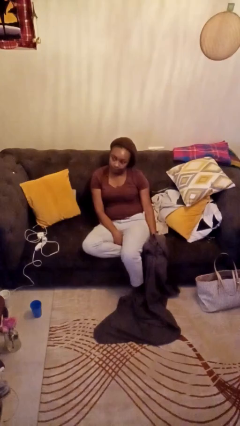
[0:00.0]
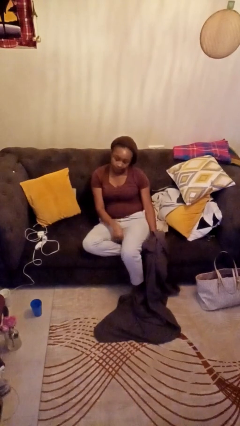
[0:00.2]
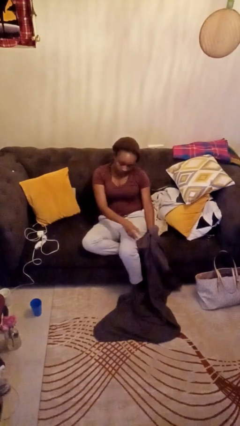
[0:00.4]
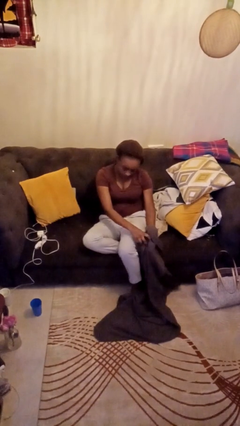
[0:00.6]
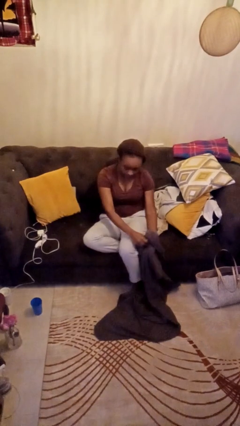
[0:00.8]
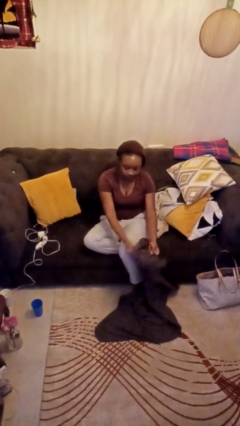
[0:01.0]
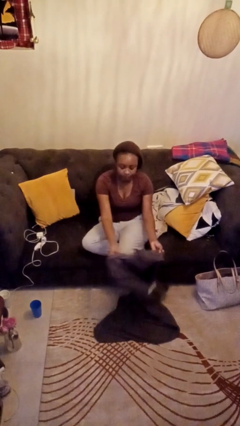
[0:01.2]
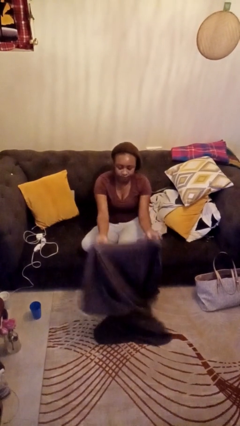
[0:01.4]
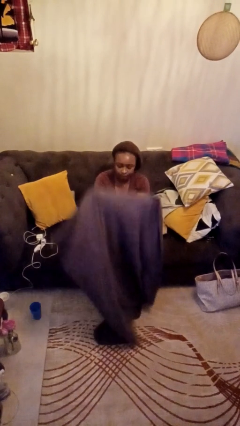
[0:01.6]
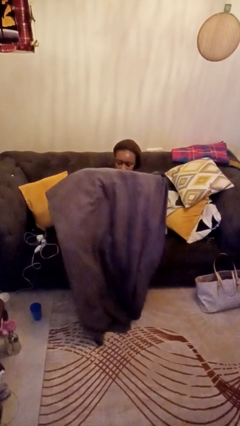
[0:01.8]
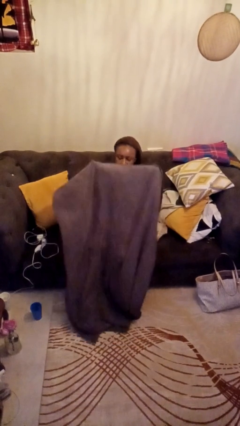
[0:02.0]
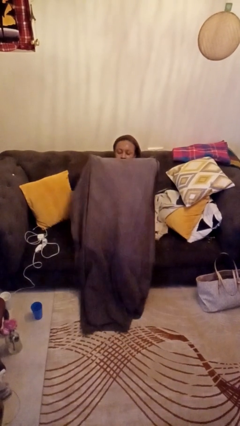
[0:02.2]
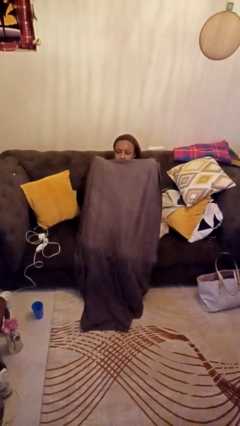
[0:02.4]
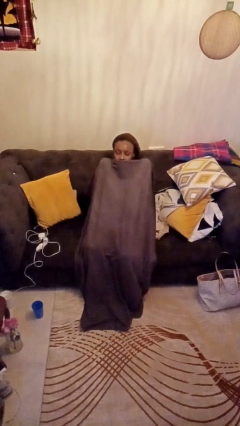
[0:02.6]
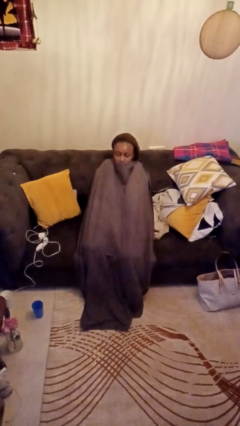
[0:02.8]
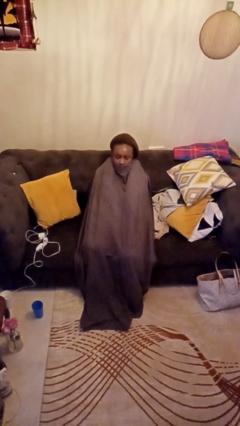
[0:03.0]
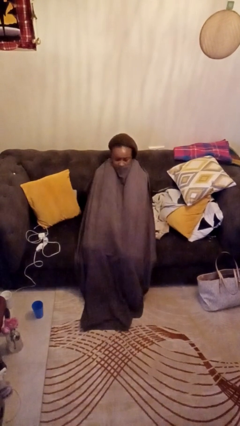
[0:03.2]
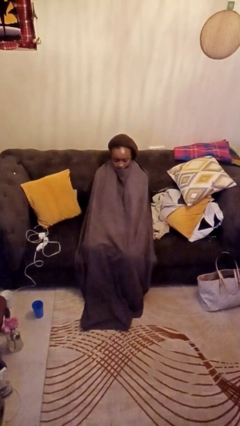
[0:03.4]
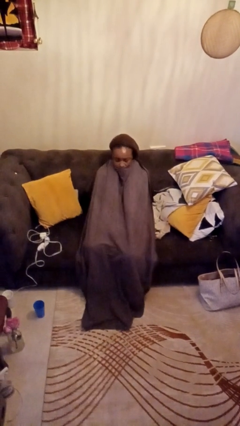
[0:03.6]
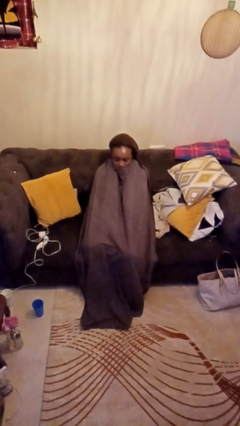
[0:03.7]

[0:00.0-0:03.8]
person covers with blanket

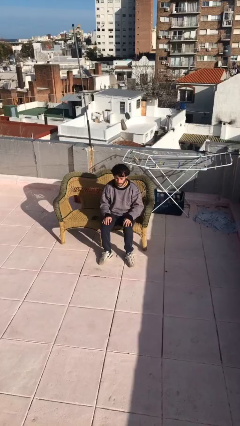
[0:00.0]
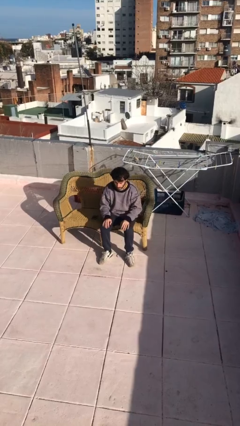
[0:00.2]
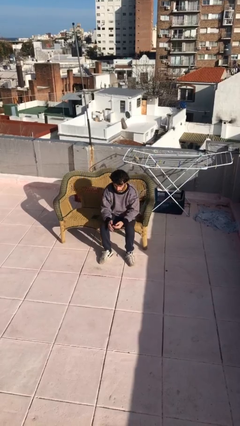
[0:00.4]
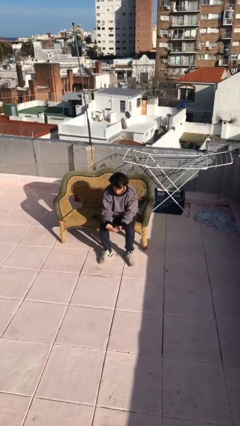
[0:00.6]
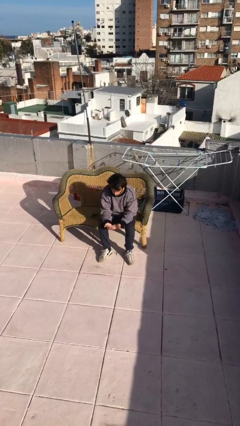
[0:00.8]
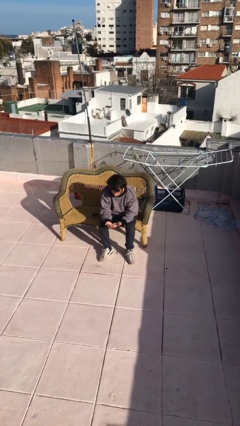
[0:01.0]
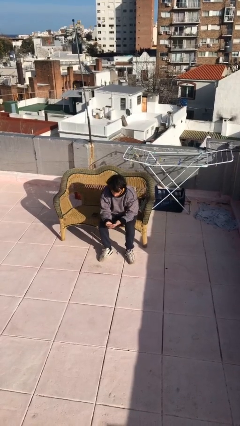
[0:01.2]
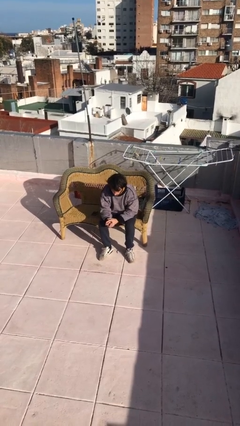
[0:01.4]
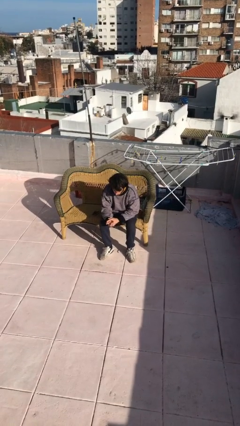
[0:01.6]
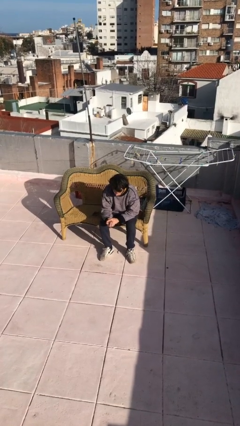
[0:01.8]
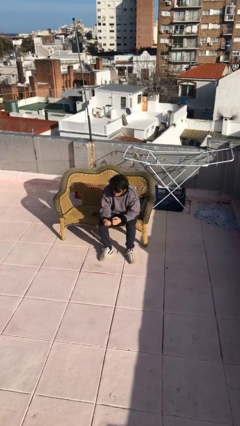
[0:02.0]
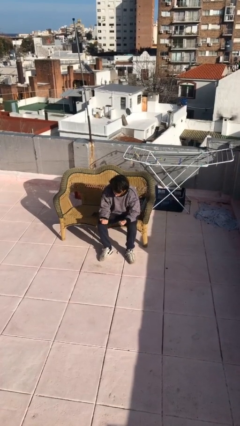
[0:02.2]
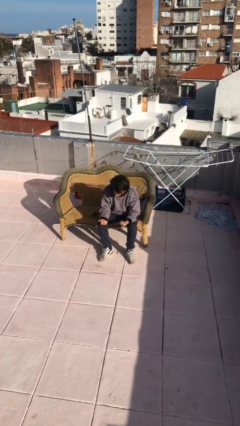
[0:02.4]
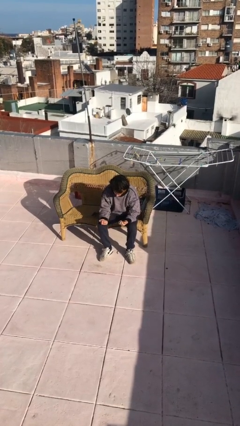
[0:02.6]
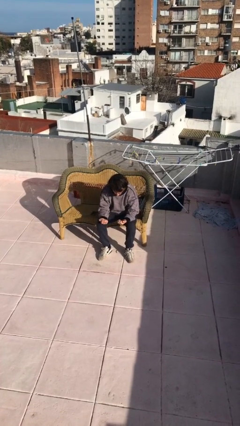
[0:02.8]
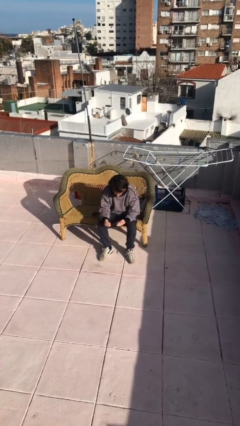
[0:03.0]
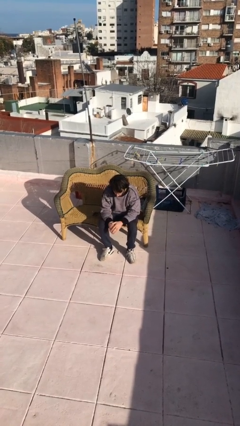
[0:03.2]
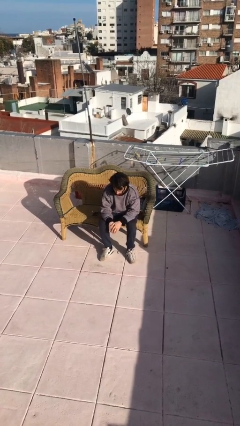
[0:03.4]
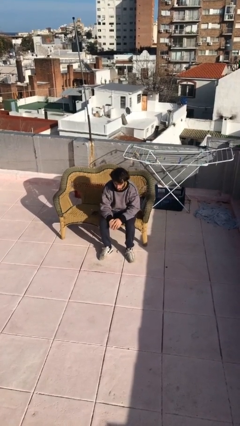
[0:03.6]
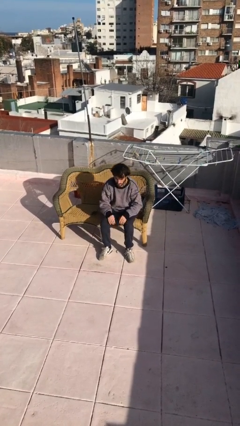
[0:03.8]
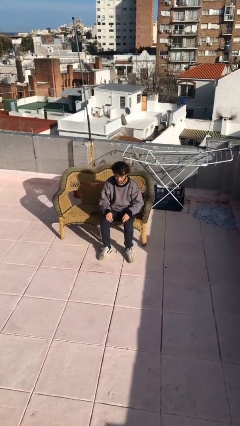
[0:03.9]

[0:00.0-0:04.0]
person looks at hands in lap

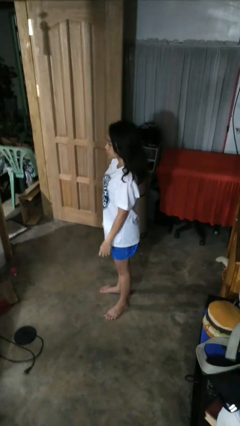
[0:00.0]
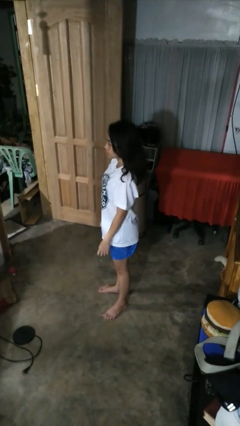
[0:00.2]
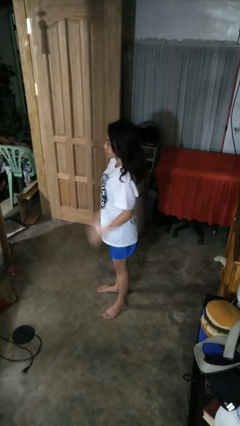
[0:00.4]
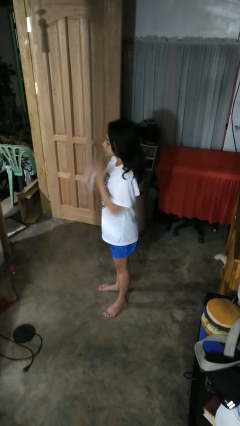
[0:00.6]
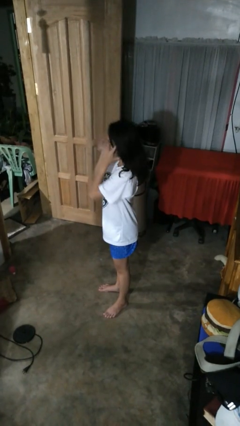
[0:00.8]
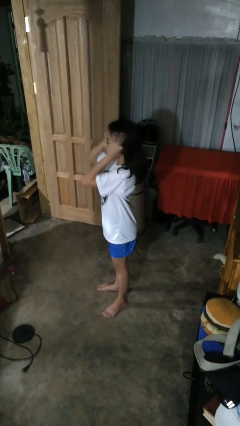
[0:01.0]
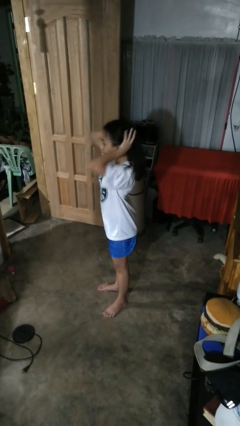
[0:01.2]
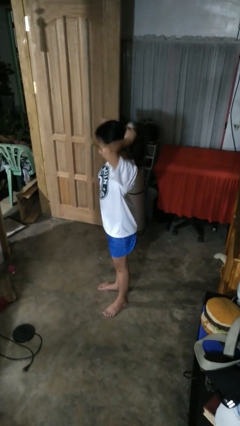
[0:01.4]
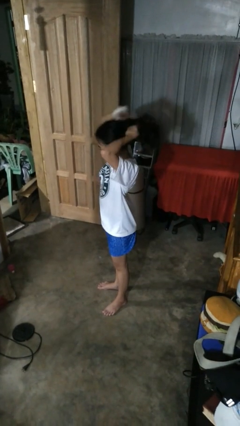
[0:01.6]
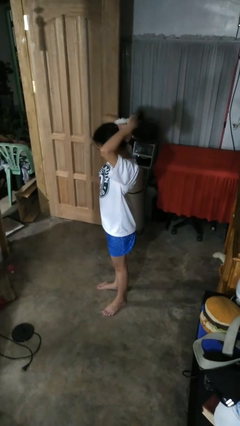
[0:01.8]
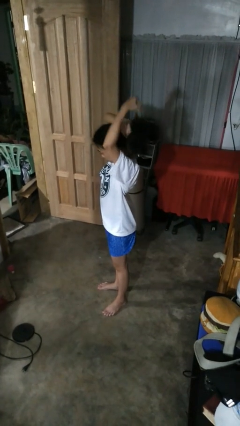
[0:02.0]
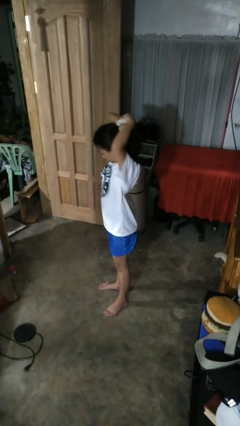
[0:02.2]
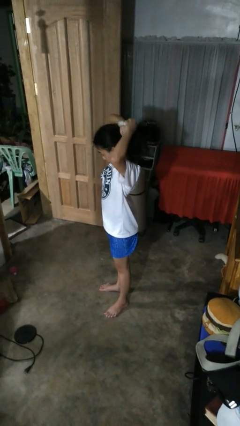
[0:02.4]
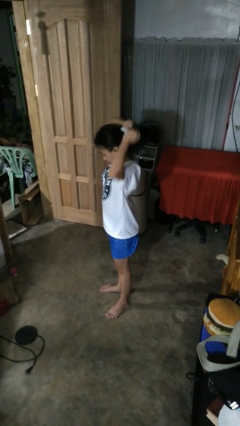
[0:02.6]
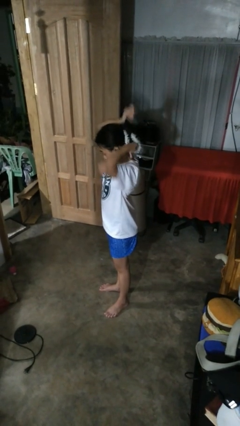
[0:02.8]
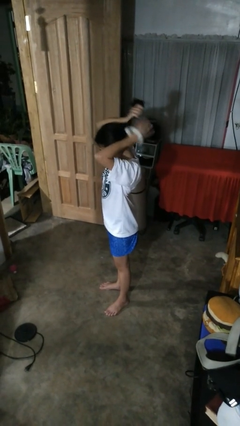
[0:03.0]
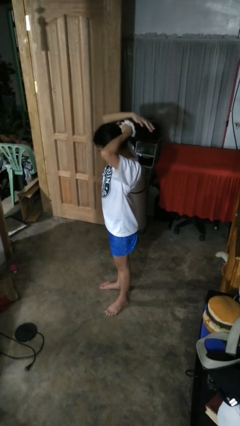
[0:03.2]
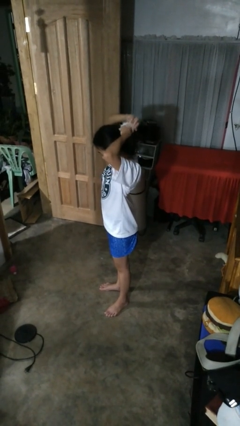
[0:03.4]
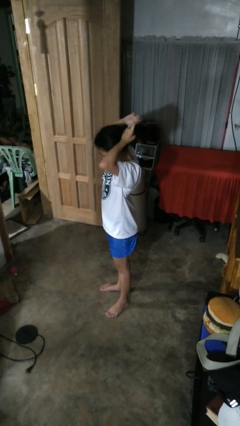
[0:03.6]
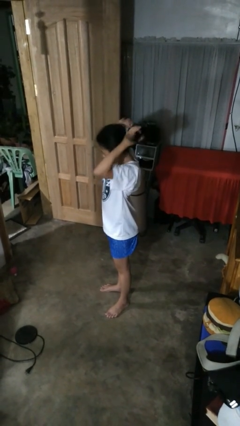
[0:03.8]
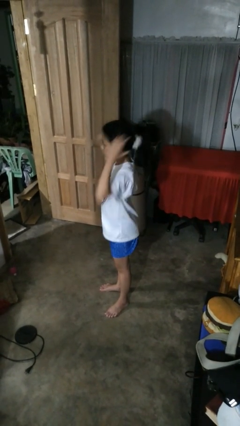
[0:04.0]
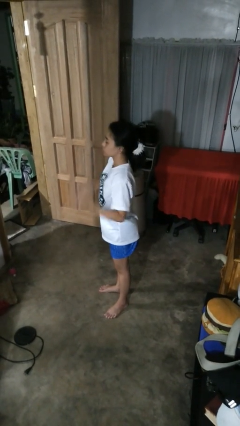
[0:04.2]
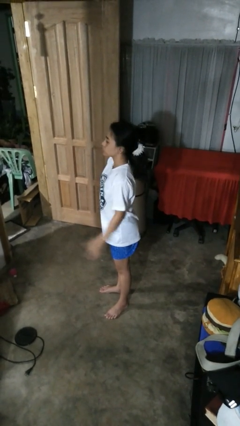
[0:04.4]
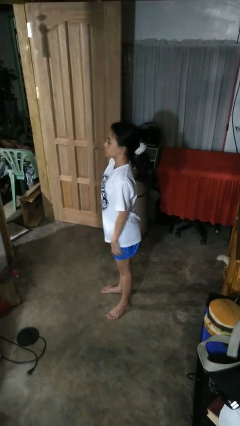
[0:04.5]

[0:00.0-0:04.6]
person puts hair in ponytail

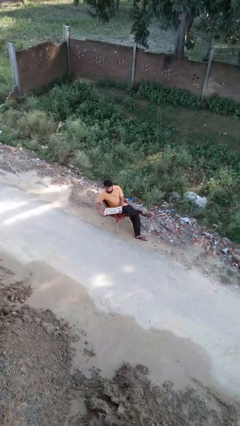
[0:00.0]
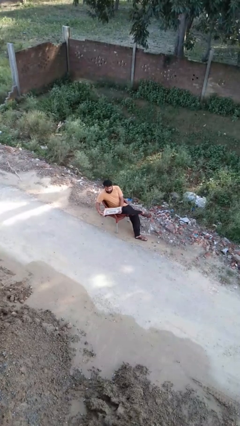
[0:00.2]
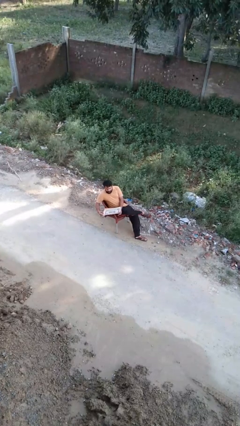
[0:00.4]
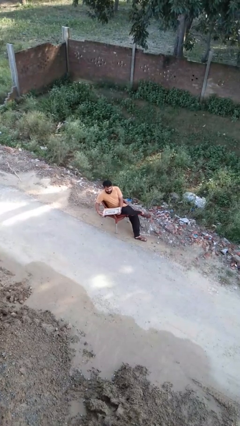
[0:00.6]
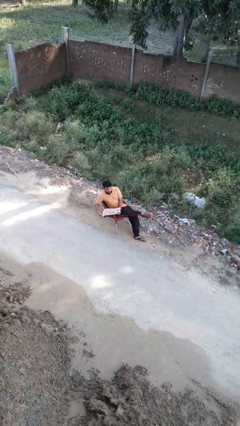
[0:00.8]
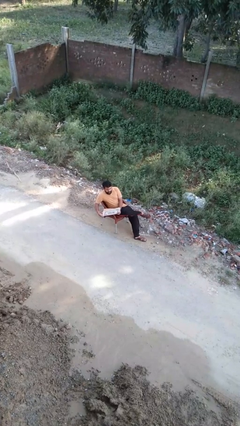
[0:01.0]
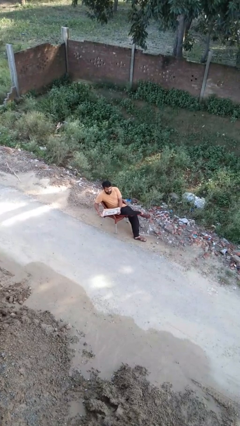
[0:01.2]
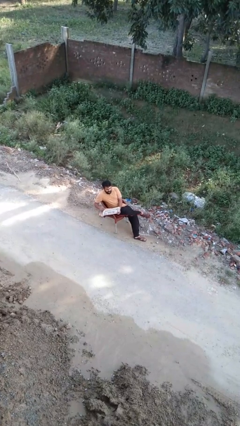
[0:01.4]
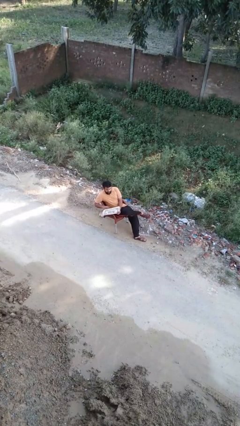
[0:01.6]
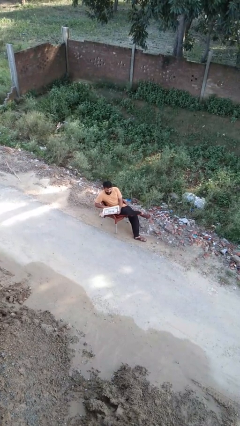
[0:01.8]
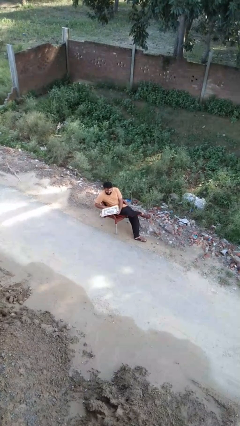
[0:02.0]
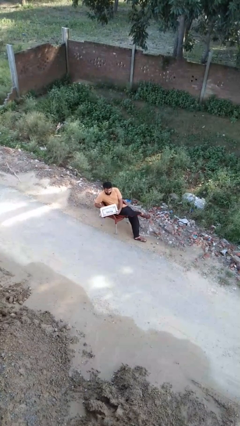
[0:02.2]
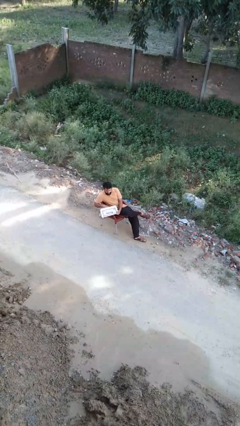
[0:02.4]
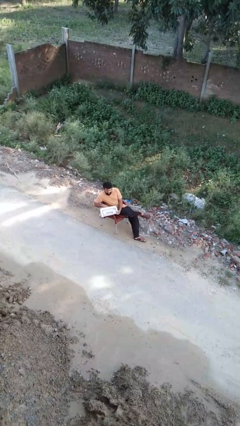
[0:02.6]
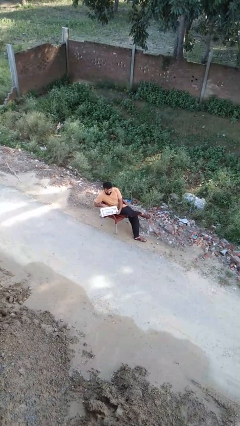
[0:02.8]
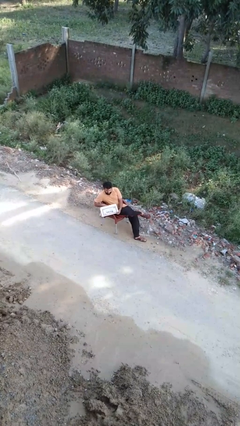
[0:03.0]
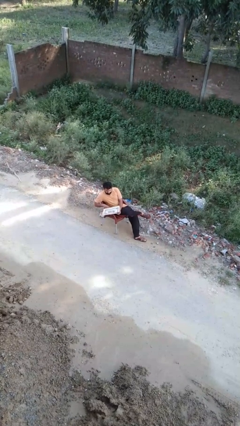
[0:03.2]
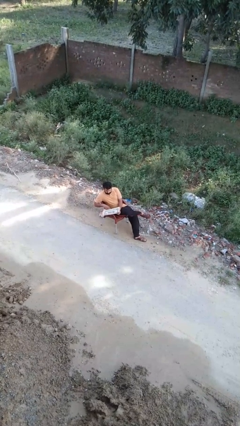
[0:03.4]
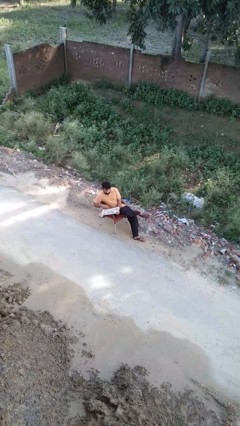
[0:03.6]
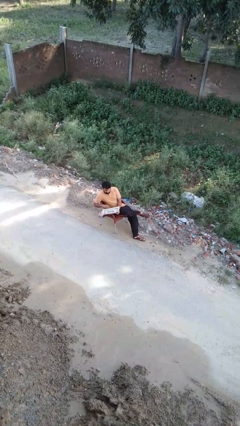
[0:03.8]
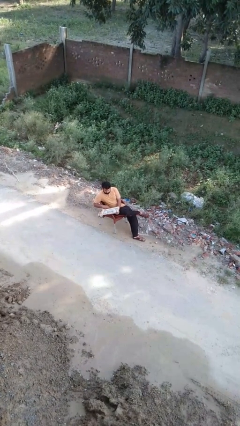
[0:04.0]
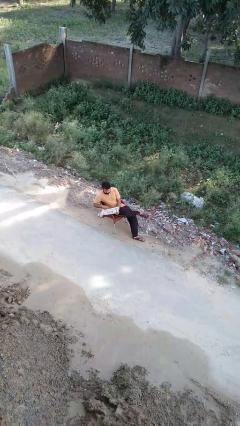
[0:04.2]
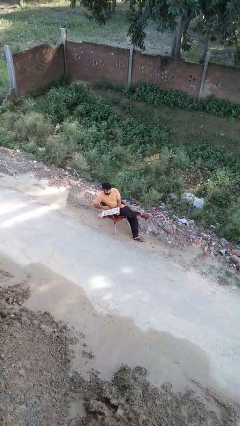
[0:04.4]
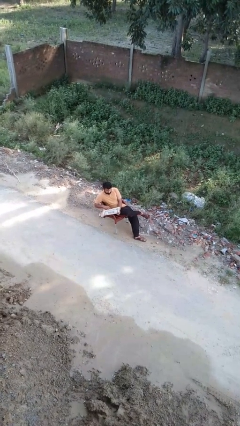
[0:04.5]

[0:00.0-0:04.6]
person opens laptop

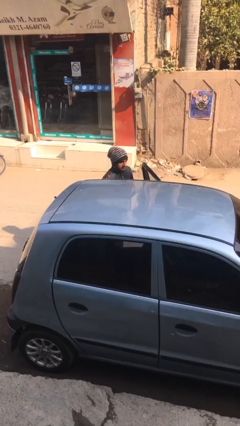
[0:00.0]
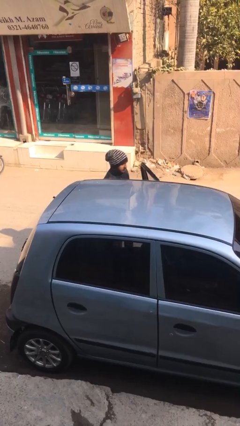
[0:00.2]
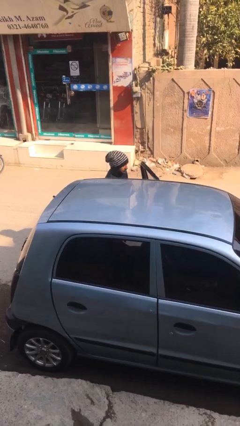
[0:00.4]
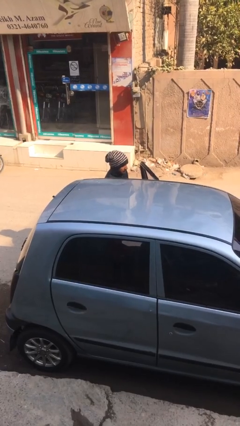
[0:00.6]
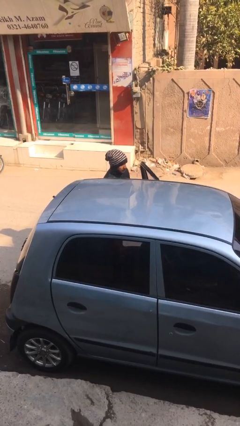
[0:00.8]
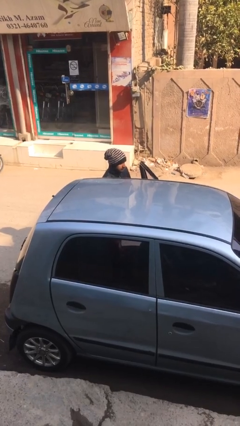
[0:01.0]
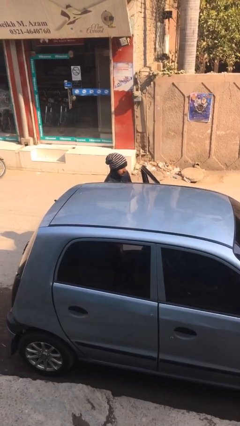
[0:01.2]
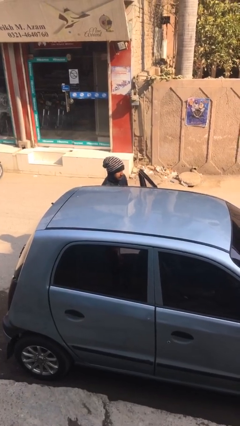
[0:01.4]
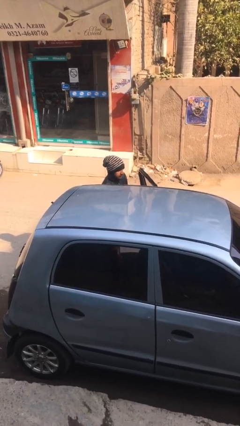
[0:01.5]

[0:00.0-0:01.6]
person loads car
